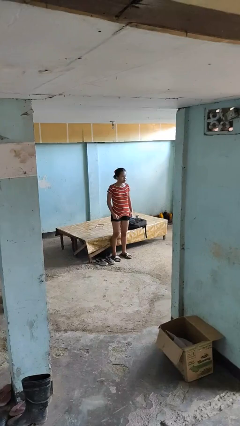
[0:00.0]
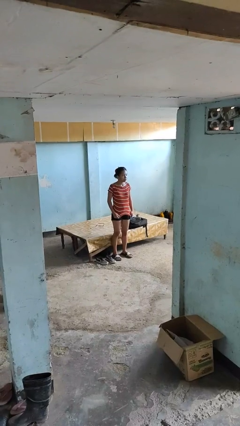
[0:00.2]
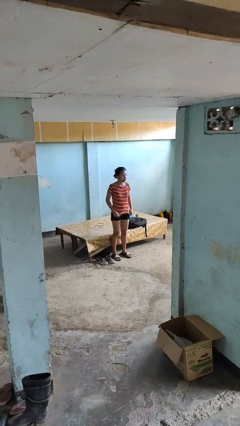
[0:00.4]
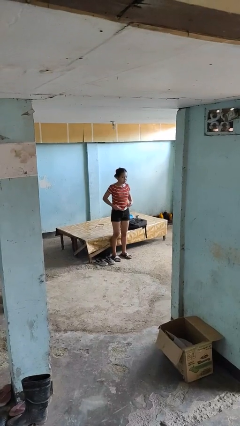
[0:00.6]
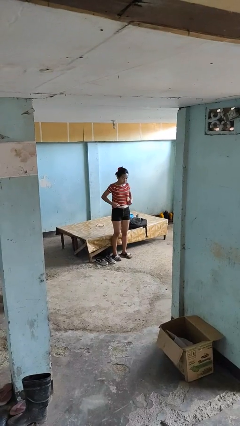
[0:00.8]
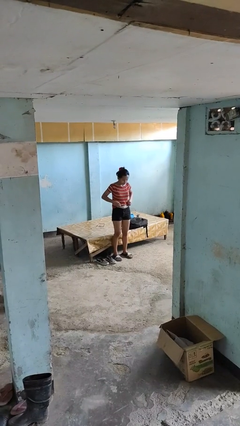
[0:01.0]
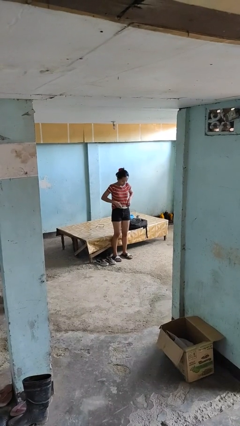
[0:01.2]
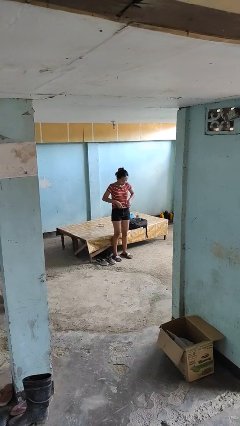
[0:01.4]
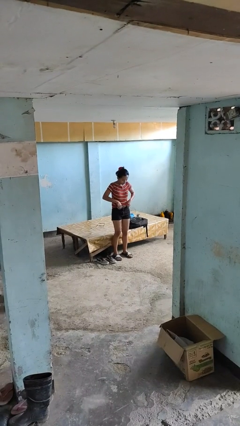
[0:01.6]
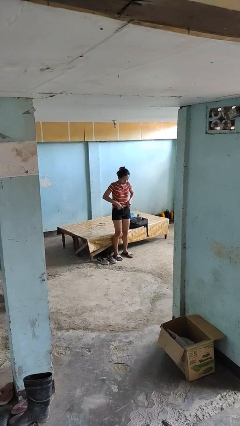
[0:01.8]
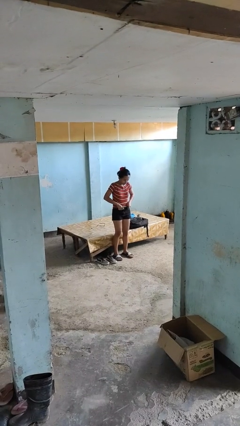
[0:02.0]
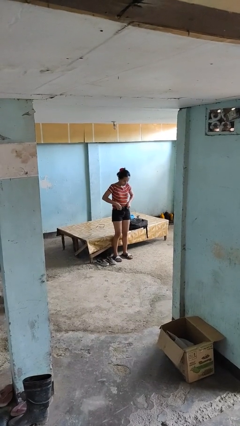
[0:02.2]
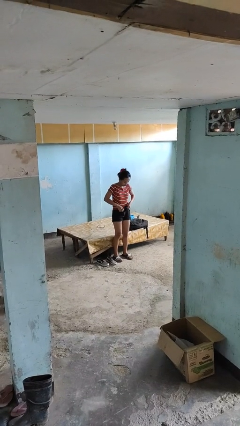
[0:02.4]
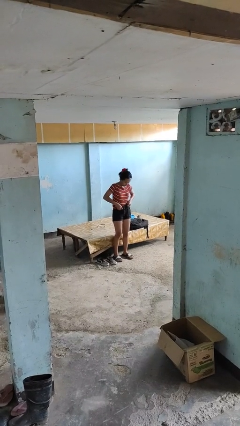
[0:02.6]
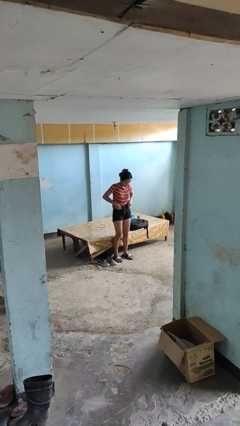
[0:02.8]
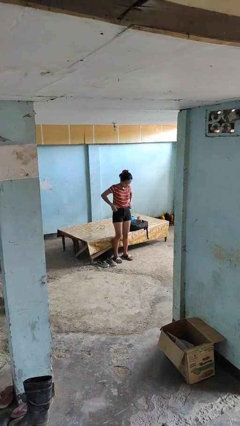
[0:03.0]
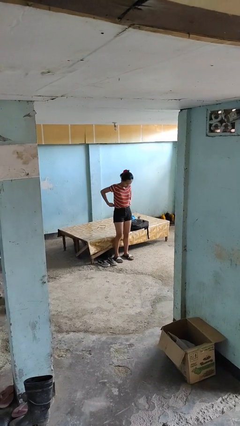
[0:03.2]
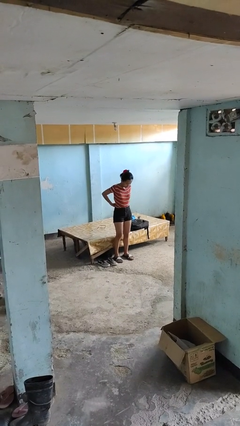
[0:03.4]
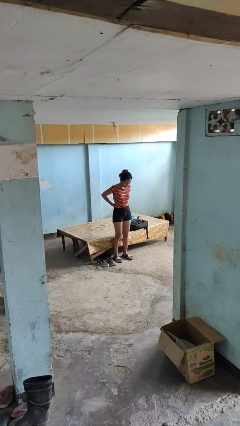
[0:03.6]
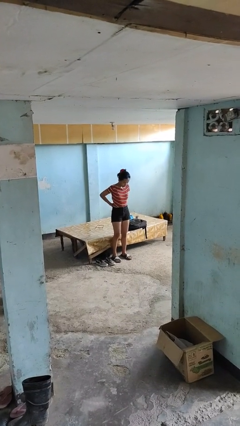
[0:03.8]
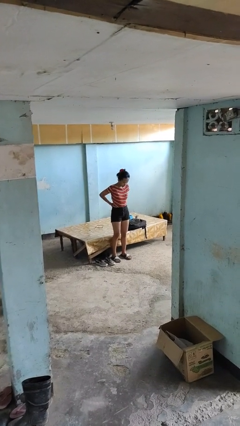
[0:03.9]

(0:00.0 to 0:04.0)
person tucks in shirt

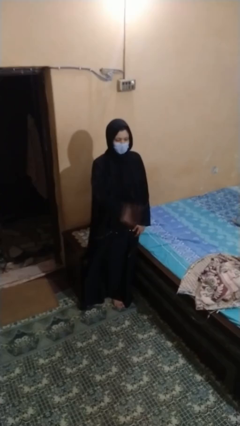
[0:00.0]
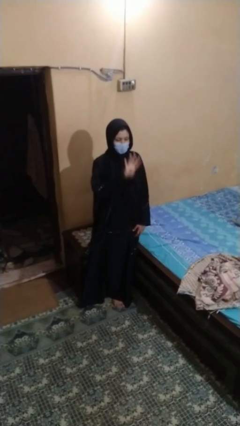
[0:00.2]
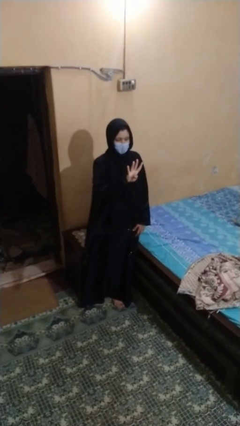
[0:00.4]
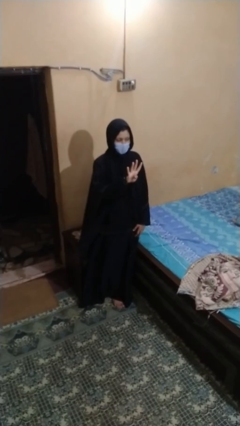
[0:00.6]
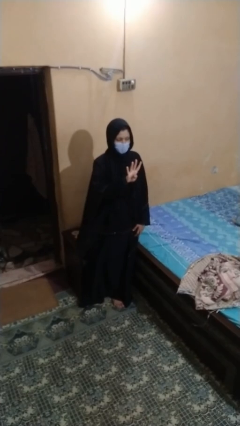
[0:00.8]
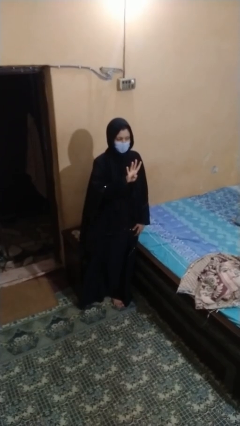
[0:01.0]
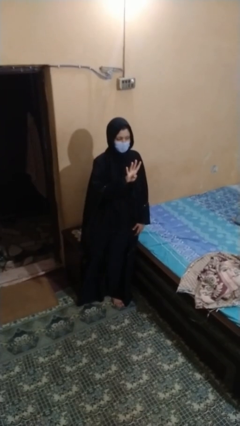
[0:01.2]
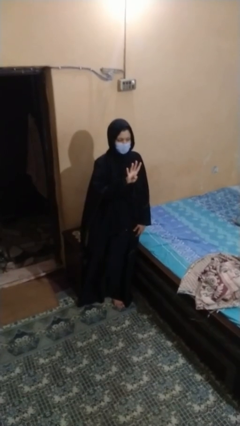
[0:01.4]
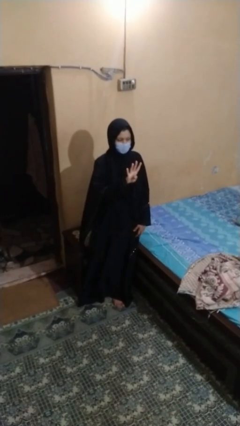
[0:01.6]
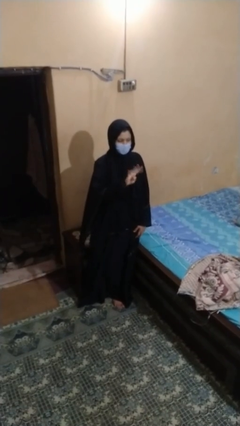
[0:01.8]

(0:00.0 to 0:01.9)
person gestures number four

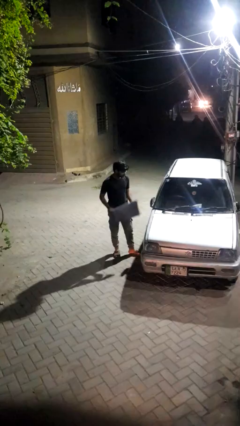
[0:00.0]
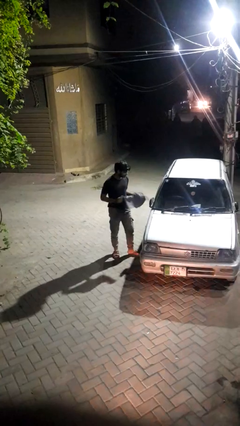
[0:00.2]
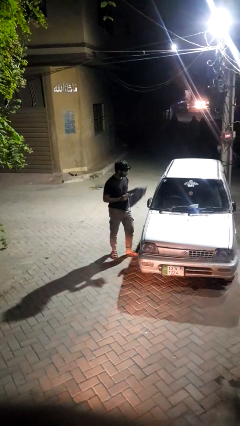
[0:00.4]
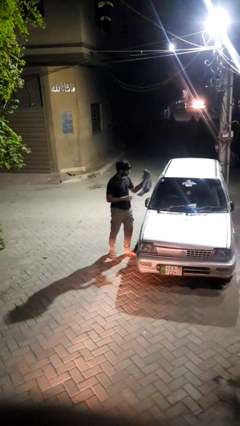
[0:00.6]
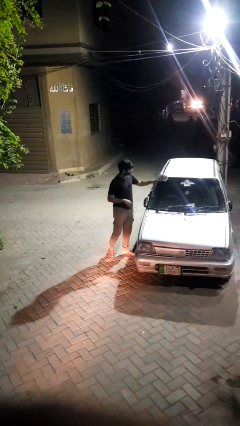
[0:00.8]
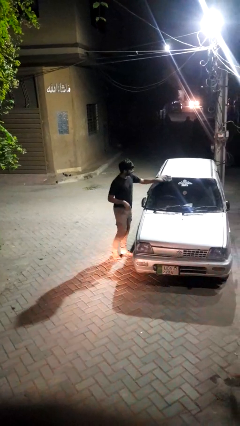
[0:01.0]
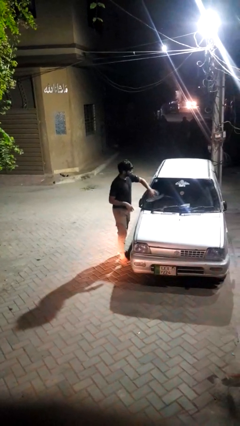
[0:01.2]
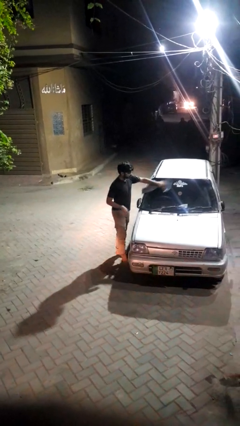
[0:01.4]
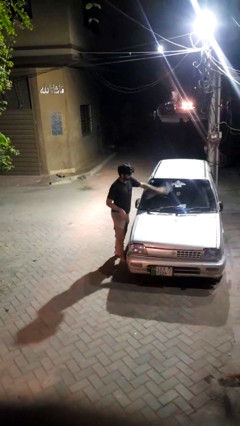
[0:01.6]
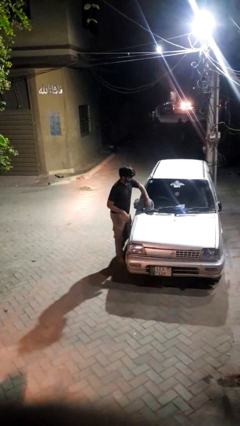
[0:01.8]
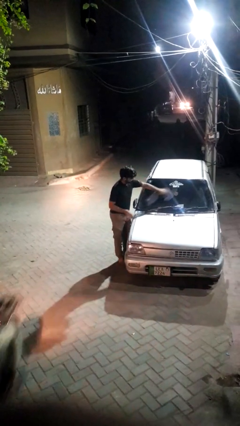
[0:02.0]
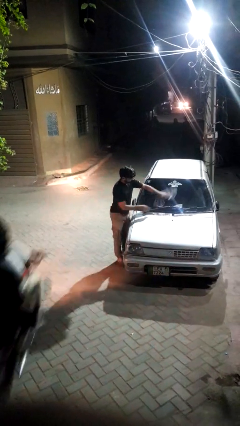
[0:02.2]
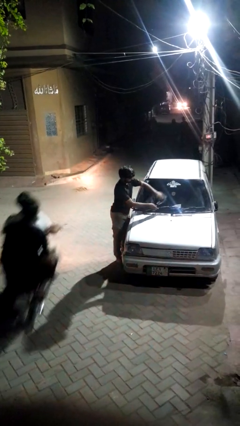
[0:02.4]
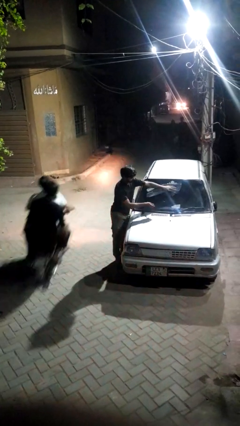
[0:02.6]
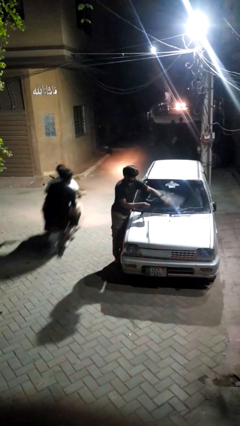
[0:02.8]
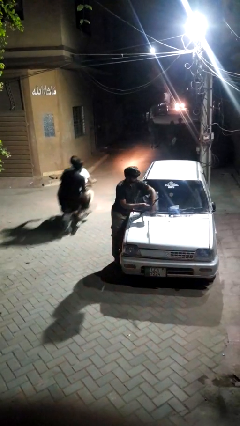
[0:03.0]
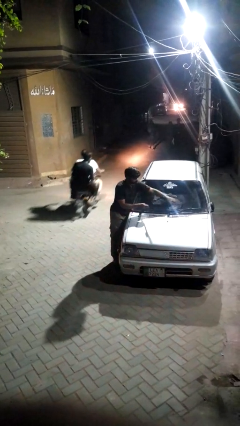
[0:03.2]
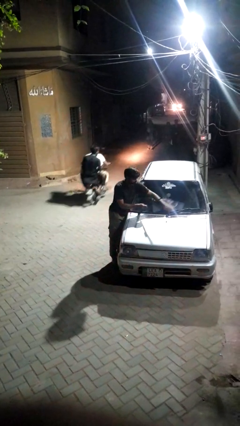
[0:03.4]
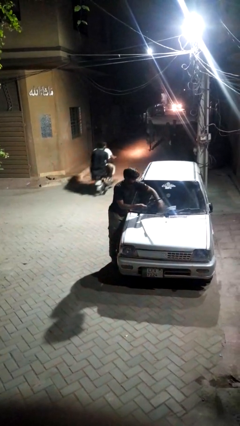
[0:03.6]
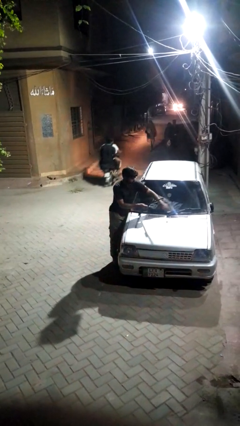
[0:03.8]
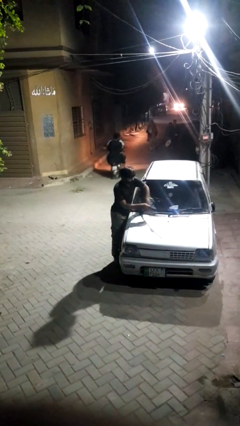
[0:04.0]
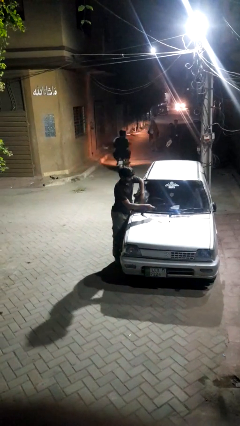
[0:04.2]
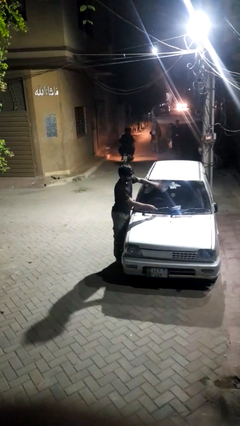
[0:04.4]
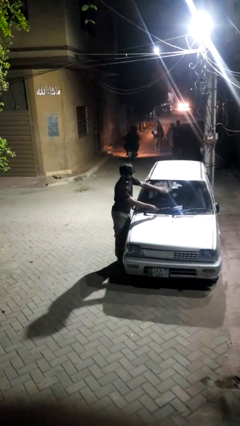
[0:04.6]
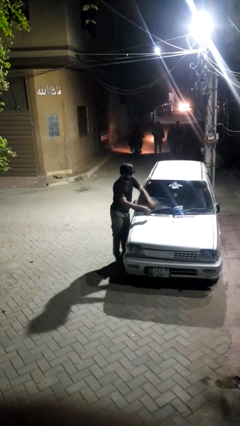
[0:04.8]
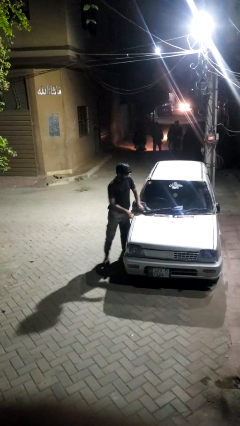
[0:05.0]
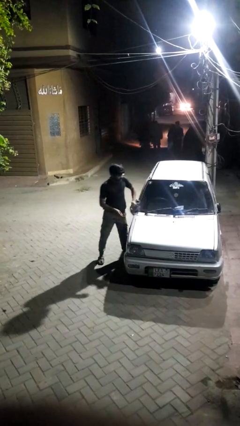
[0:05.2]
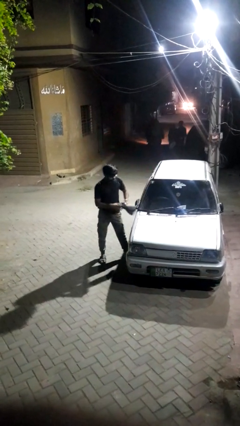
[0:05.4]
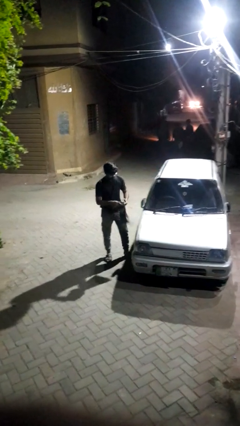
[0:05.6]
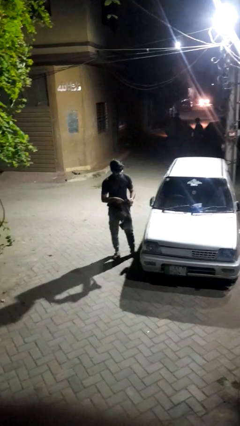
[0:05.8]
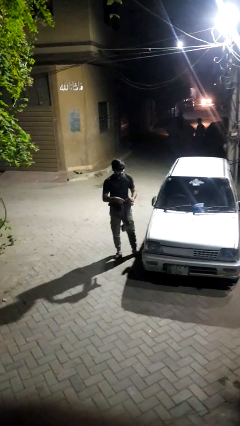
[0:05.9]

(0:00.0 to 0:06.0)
person polishes car with rag

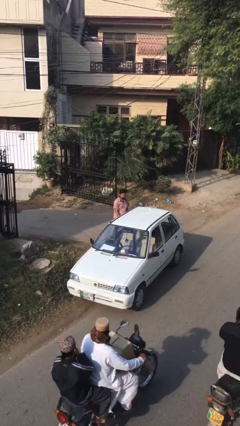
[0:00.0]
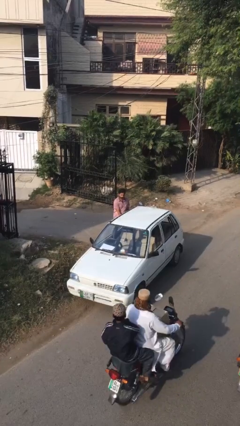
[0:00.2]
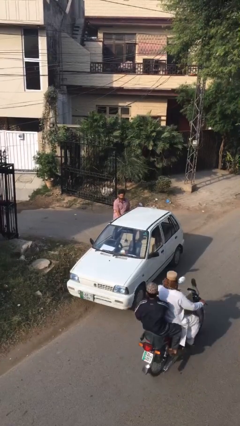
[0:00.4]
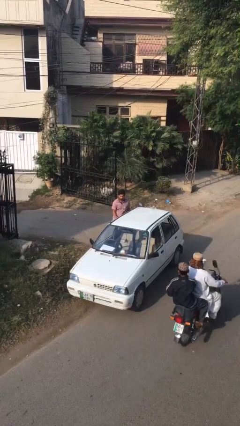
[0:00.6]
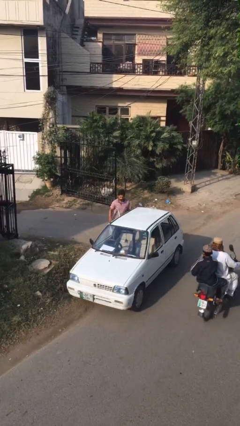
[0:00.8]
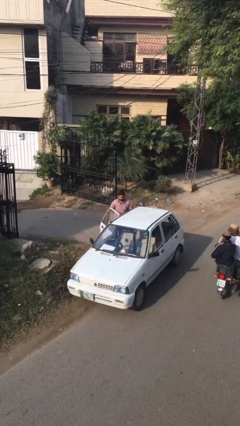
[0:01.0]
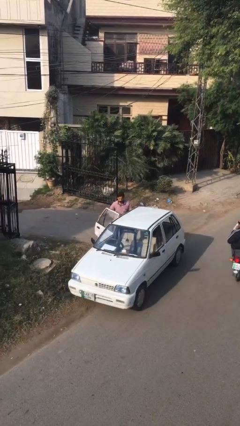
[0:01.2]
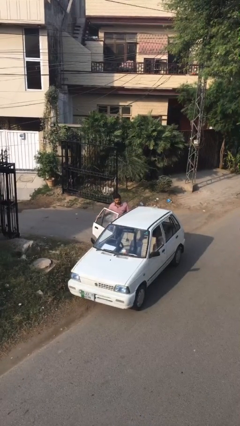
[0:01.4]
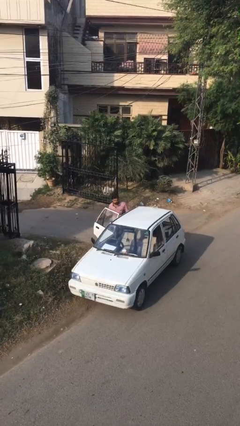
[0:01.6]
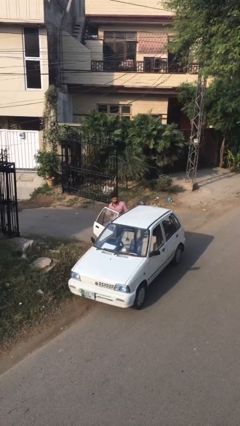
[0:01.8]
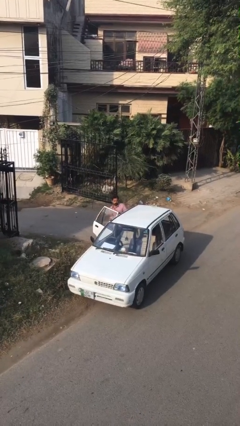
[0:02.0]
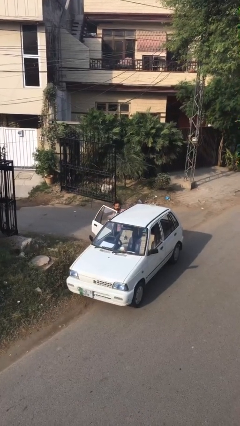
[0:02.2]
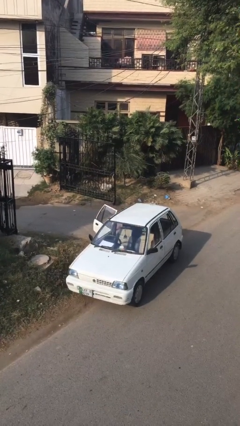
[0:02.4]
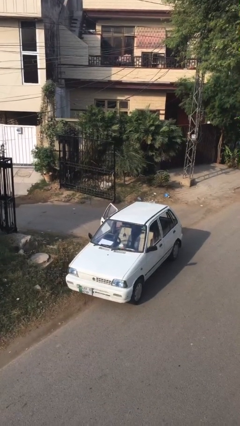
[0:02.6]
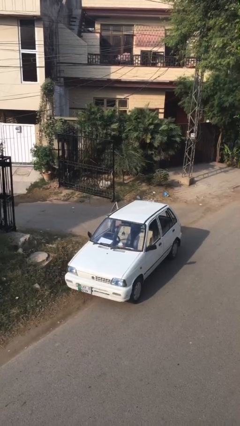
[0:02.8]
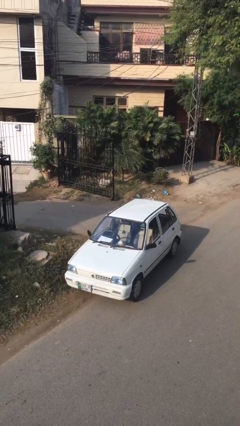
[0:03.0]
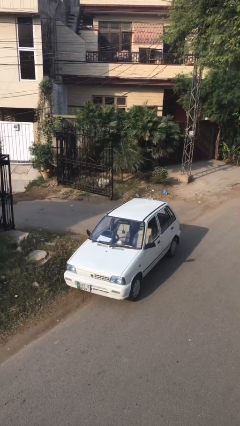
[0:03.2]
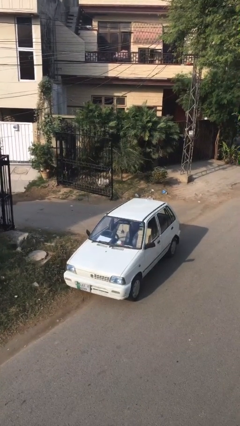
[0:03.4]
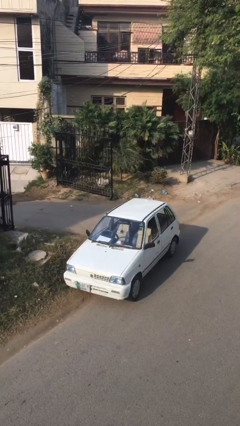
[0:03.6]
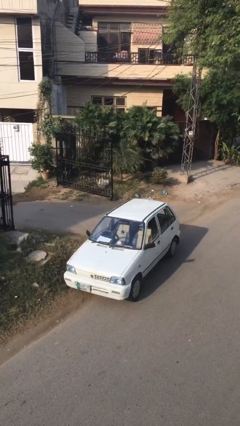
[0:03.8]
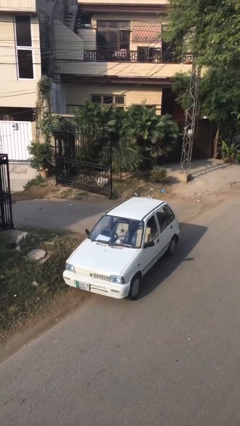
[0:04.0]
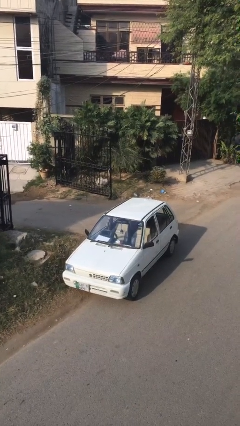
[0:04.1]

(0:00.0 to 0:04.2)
person enters car

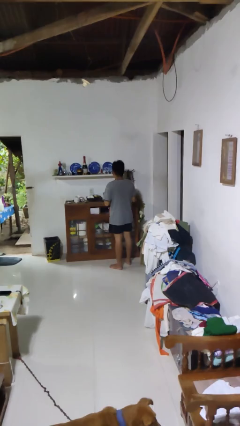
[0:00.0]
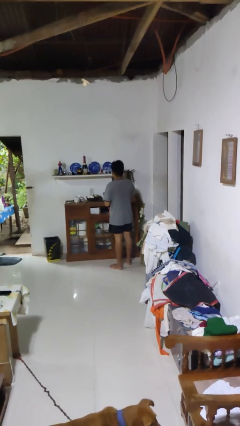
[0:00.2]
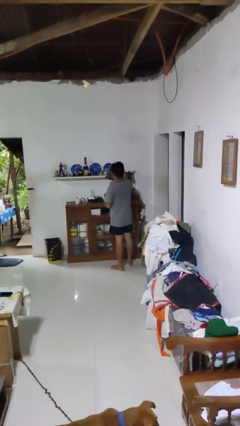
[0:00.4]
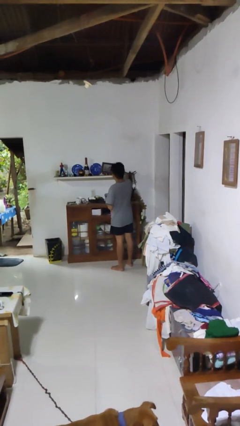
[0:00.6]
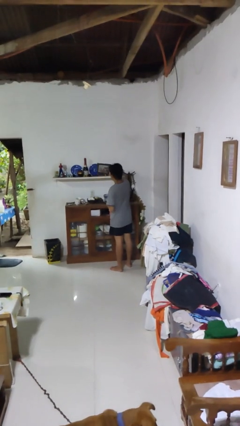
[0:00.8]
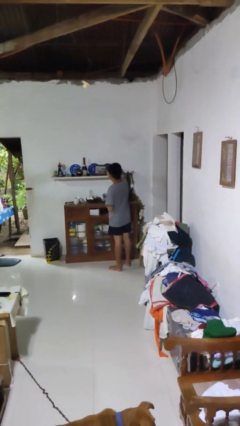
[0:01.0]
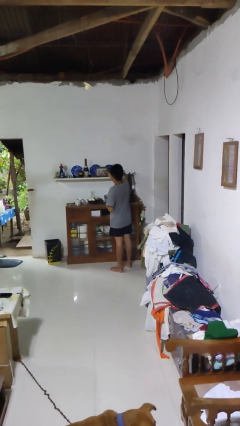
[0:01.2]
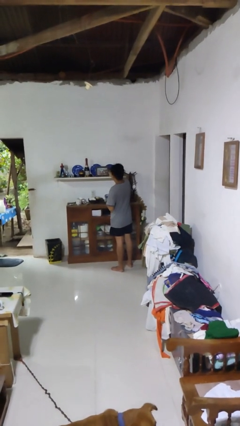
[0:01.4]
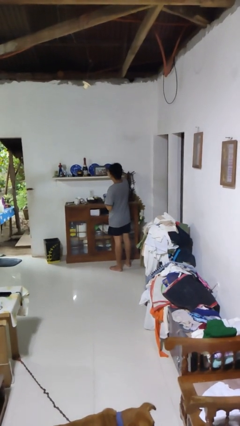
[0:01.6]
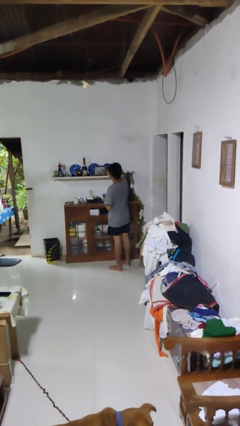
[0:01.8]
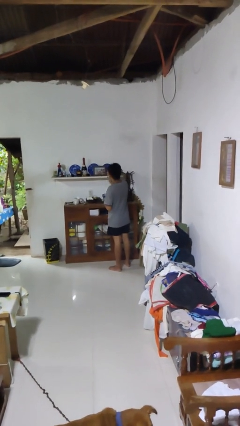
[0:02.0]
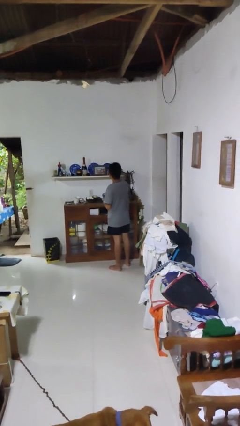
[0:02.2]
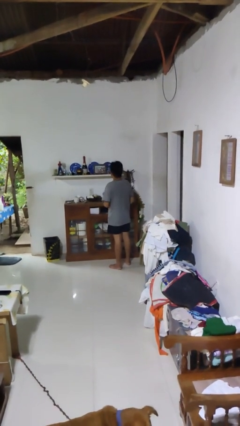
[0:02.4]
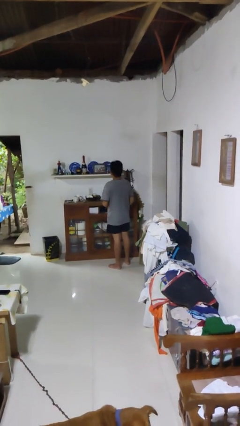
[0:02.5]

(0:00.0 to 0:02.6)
person puts down object on shelf
